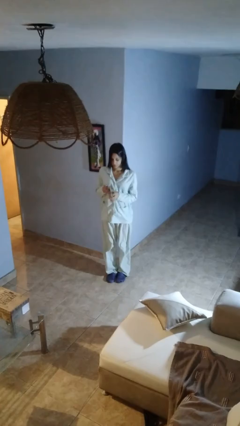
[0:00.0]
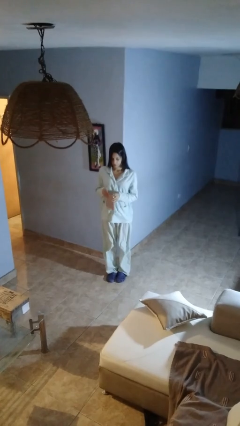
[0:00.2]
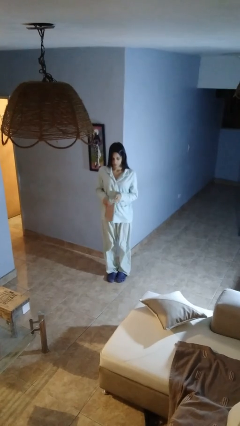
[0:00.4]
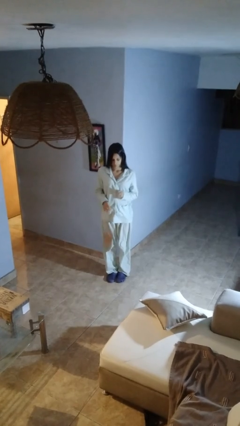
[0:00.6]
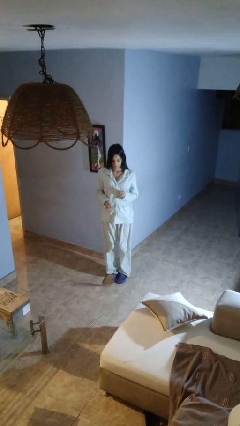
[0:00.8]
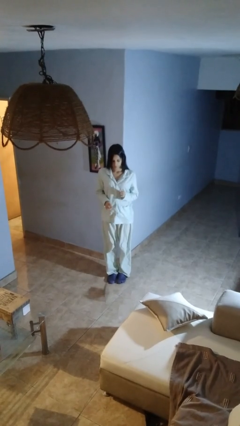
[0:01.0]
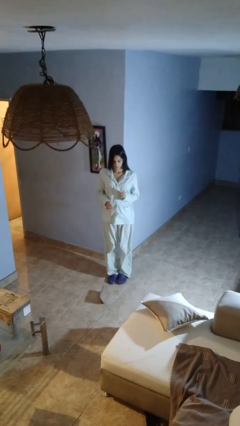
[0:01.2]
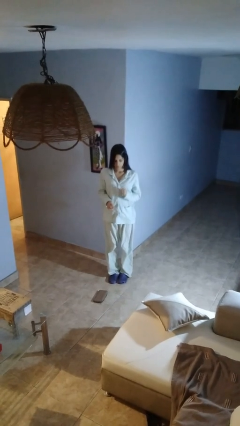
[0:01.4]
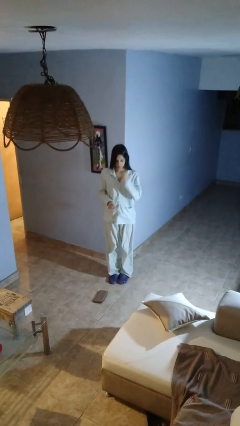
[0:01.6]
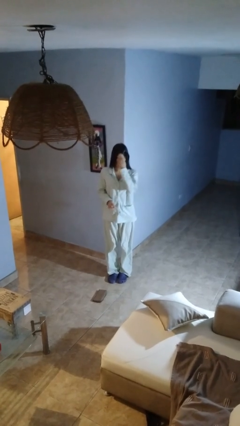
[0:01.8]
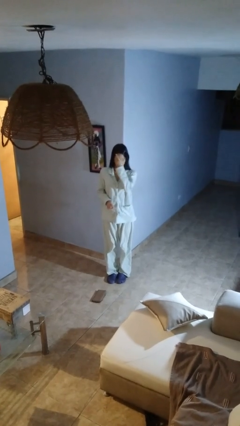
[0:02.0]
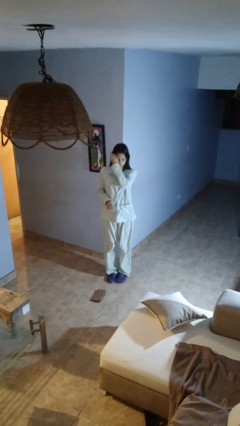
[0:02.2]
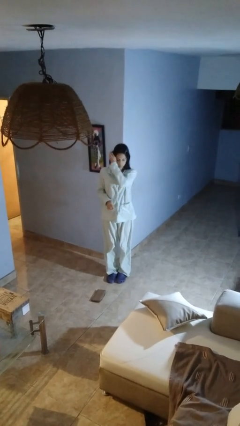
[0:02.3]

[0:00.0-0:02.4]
person drops object

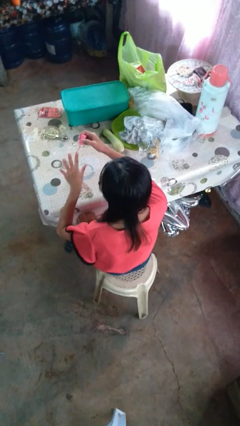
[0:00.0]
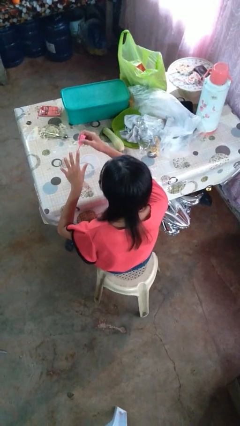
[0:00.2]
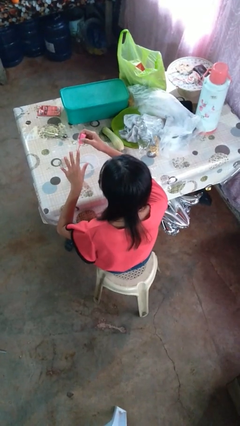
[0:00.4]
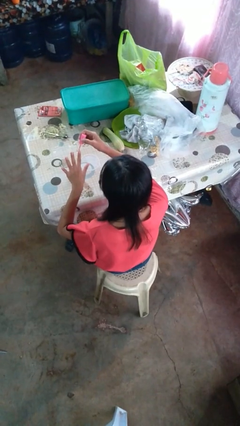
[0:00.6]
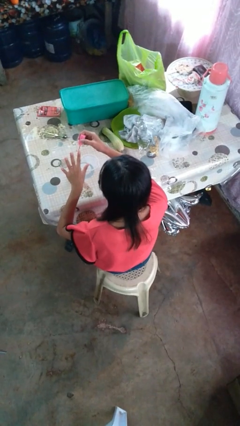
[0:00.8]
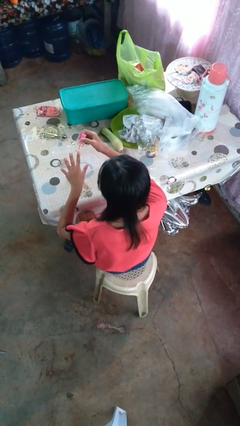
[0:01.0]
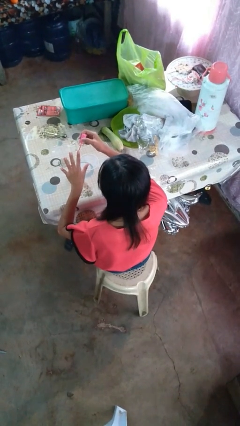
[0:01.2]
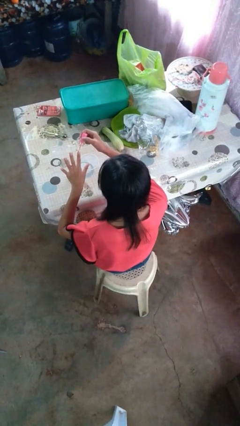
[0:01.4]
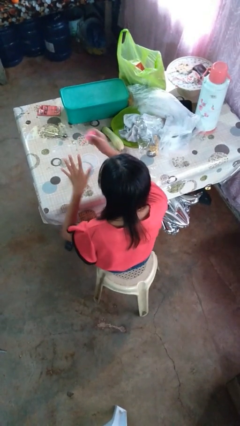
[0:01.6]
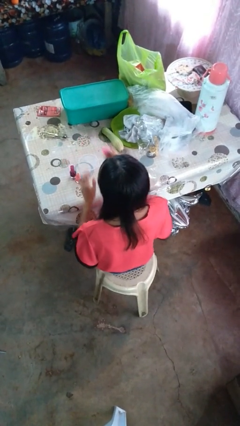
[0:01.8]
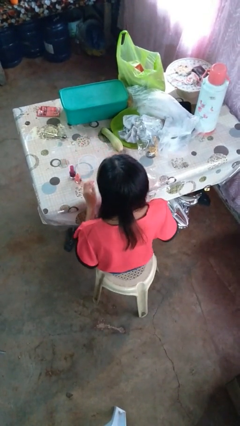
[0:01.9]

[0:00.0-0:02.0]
person paints fingernails

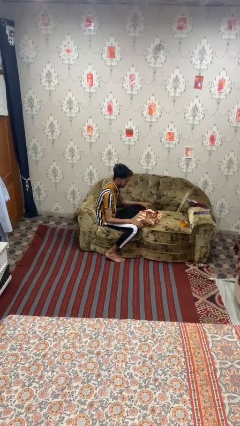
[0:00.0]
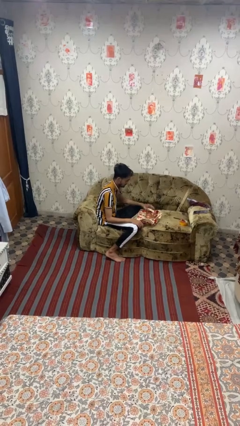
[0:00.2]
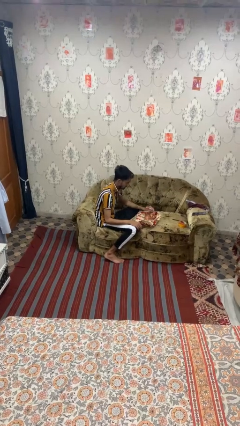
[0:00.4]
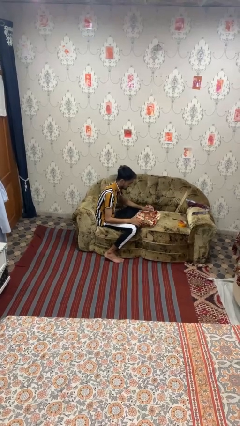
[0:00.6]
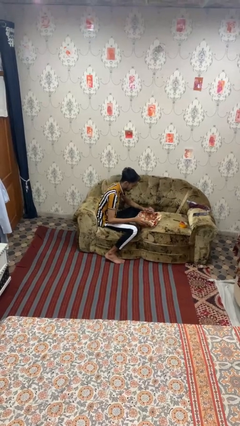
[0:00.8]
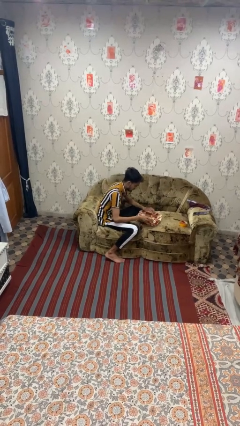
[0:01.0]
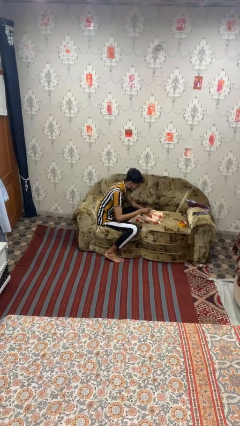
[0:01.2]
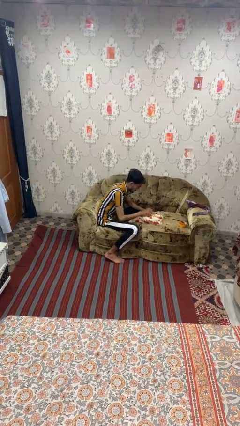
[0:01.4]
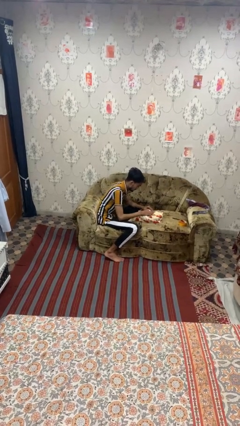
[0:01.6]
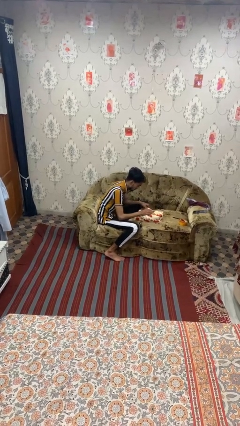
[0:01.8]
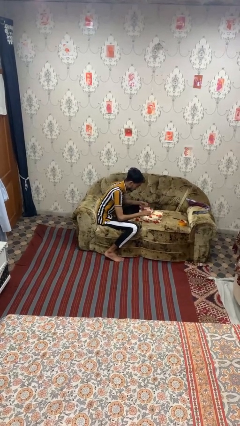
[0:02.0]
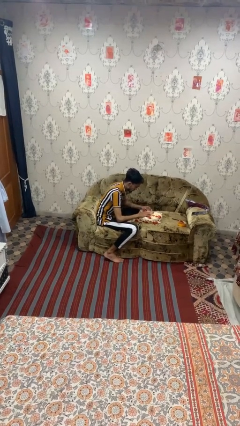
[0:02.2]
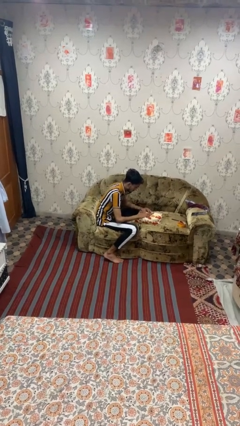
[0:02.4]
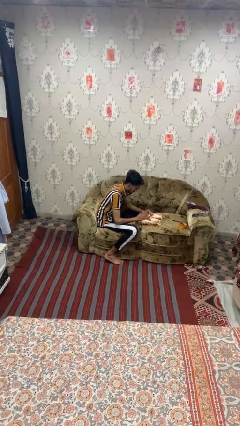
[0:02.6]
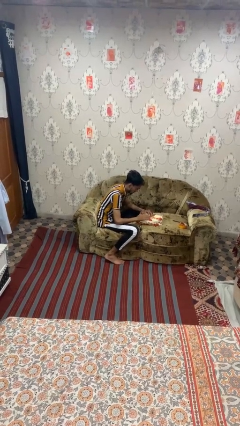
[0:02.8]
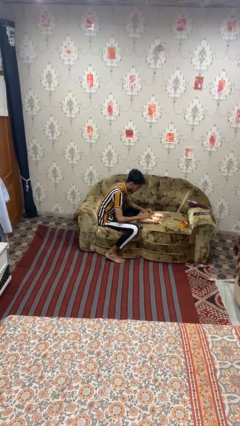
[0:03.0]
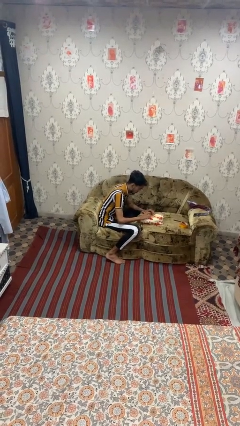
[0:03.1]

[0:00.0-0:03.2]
person wraps box

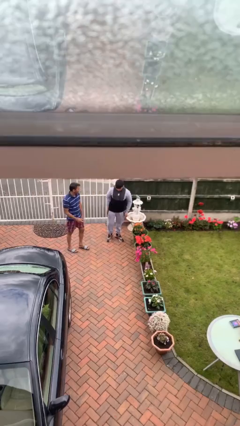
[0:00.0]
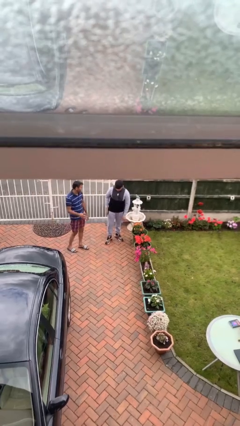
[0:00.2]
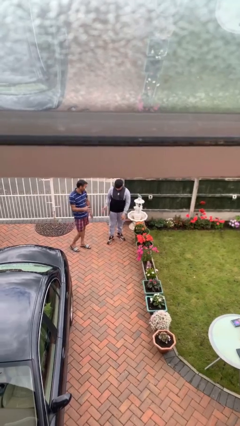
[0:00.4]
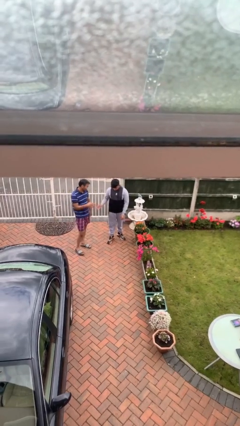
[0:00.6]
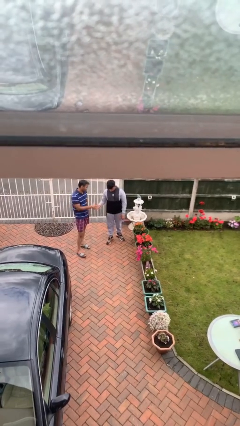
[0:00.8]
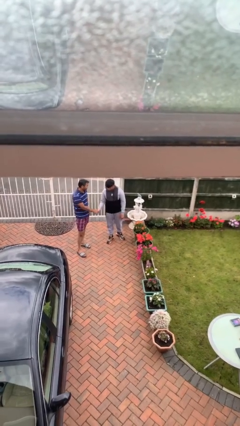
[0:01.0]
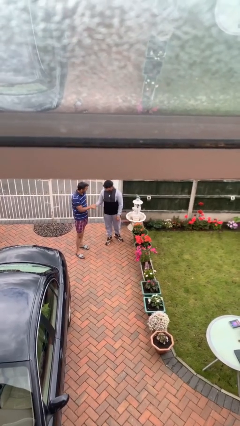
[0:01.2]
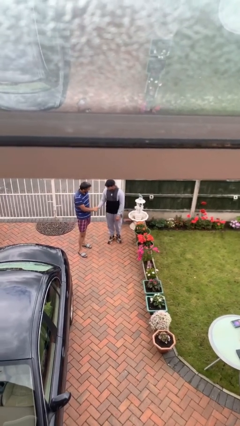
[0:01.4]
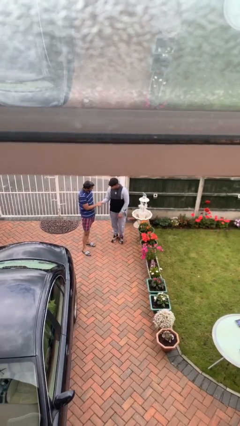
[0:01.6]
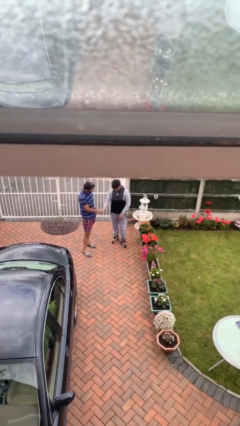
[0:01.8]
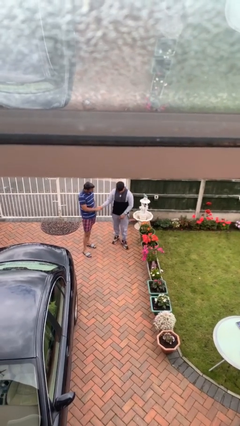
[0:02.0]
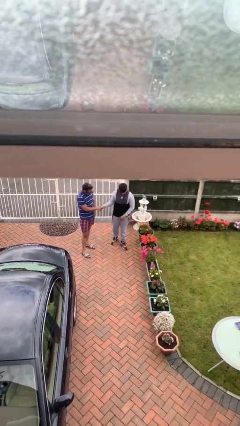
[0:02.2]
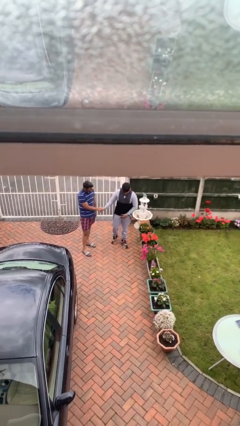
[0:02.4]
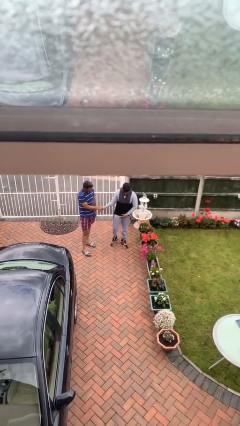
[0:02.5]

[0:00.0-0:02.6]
person shakes hand

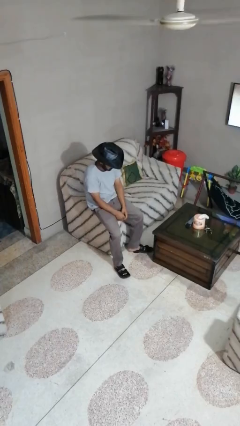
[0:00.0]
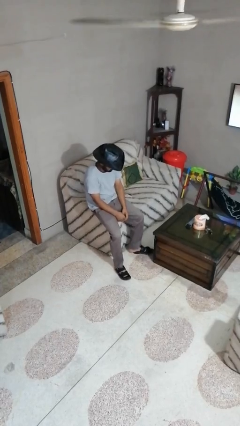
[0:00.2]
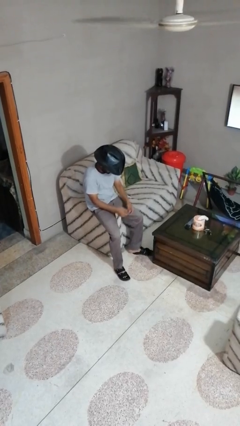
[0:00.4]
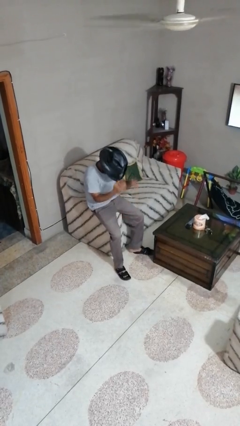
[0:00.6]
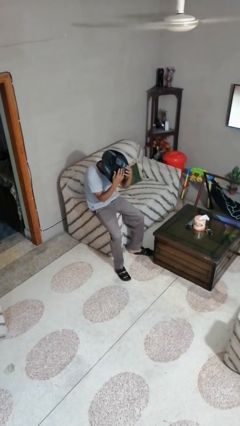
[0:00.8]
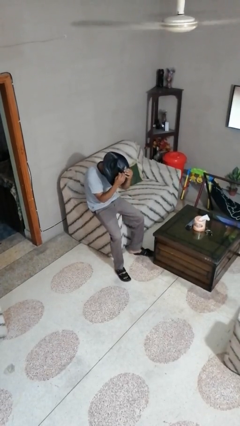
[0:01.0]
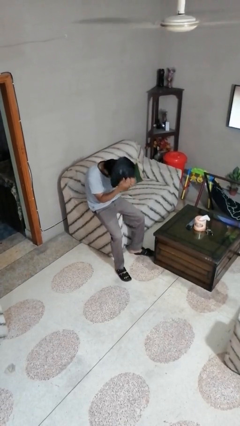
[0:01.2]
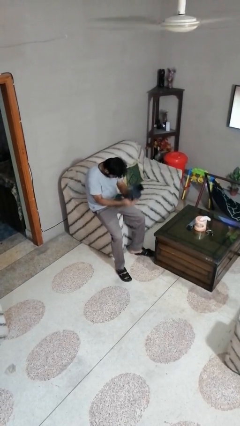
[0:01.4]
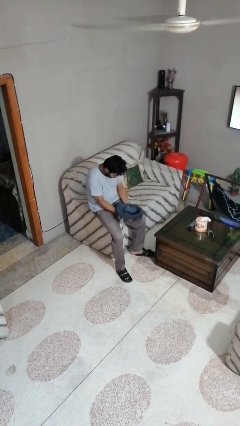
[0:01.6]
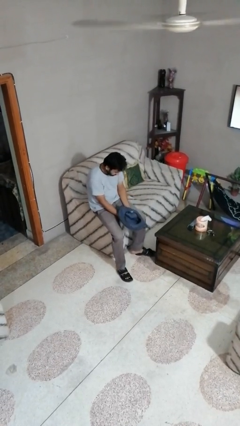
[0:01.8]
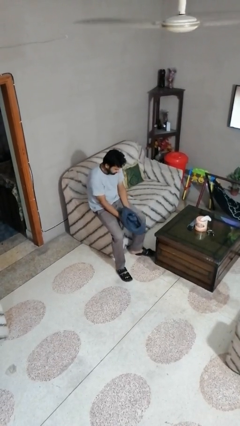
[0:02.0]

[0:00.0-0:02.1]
person takes off hat

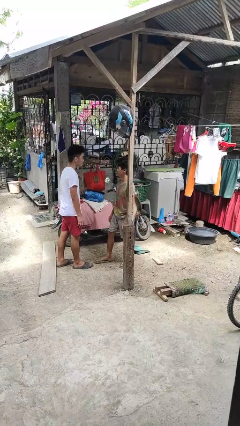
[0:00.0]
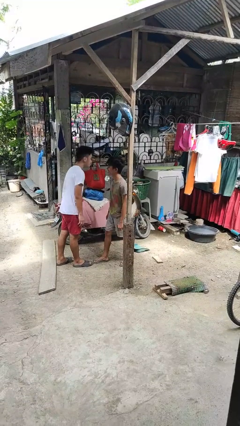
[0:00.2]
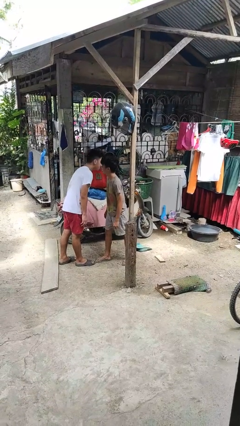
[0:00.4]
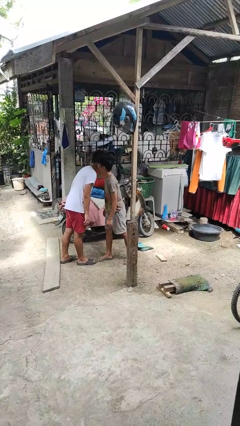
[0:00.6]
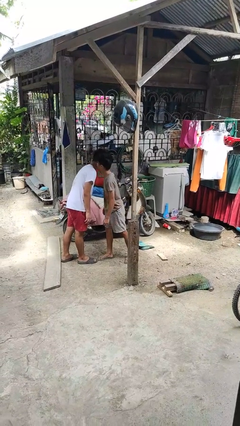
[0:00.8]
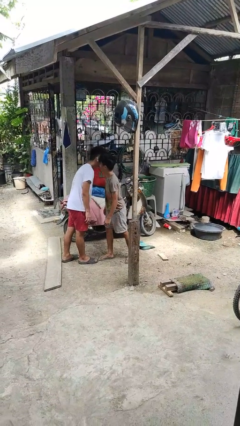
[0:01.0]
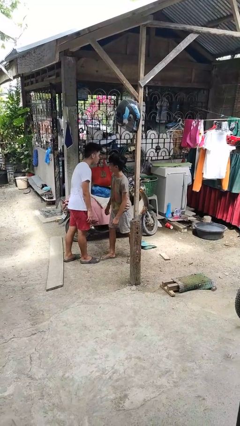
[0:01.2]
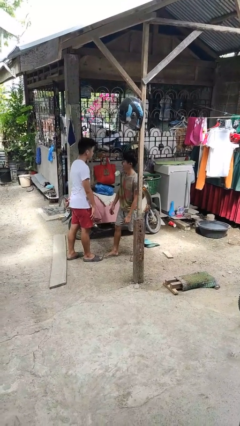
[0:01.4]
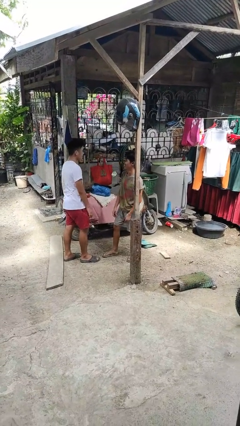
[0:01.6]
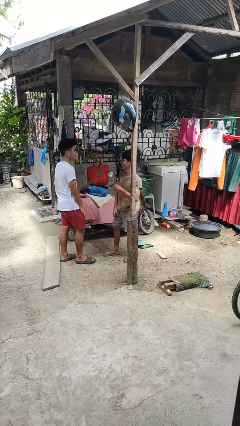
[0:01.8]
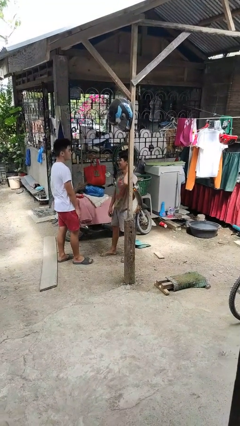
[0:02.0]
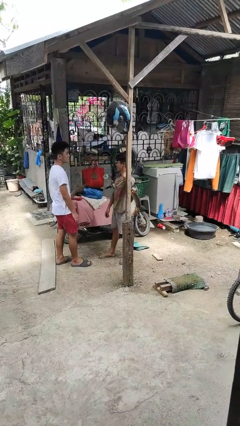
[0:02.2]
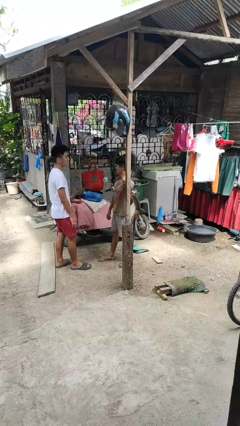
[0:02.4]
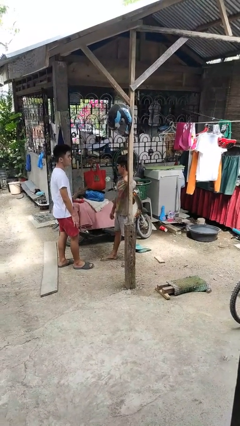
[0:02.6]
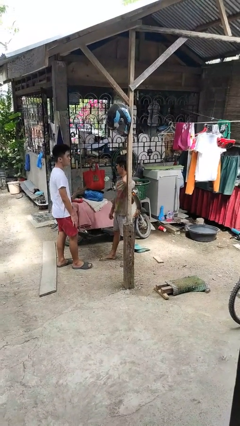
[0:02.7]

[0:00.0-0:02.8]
person kisses cheek of person

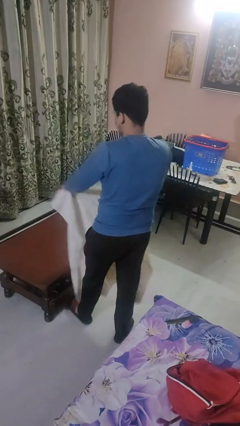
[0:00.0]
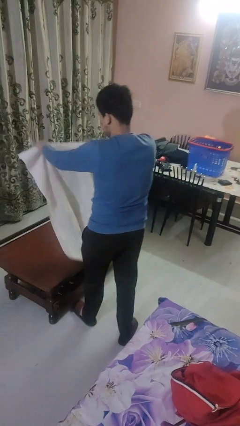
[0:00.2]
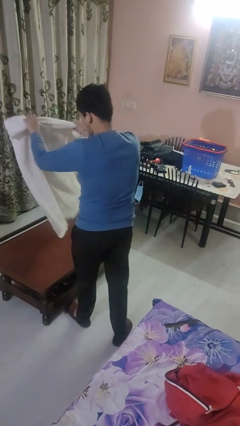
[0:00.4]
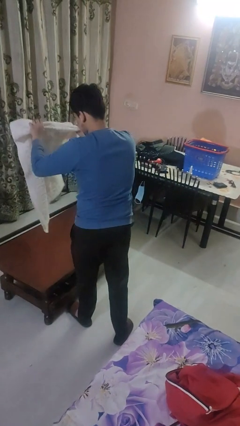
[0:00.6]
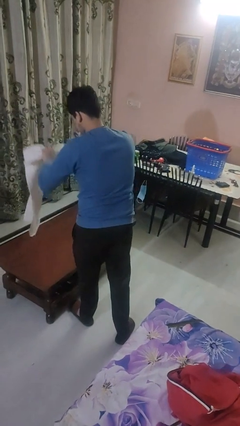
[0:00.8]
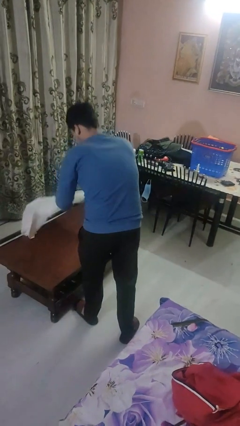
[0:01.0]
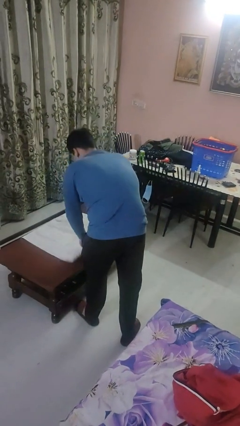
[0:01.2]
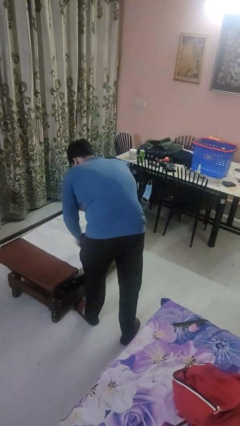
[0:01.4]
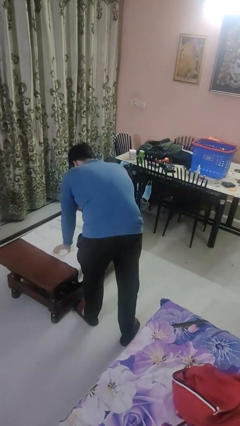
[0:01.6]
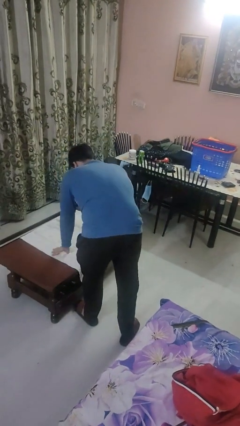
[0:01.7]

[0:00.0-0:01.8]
person spreads tablecloth
